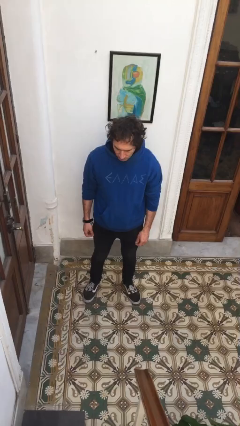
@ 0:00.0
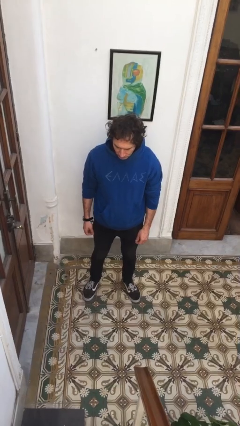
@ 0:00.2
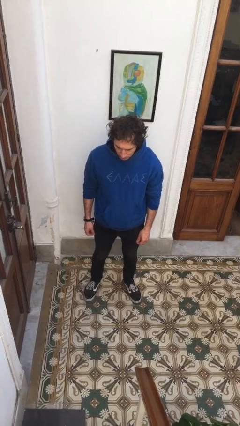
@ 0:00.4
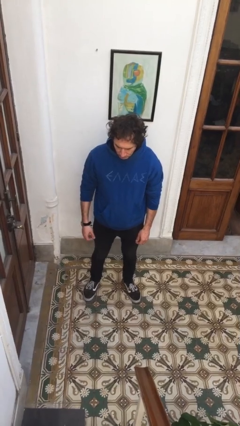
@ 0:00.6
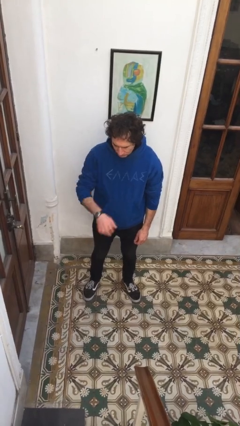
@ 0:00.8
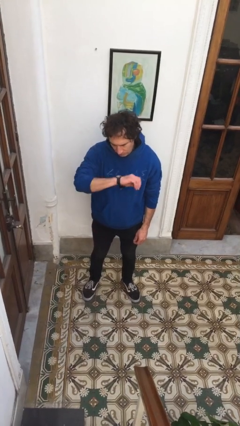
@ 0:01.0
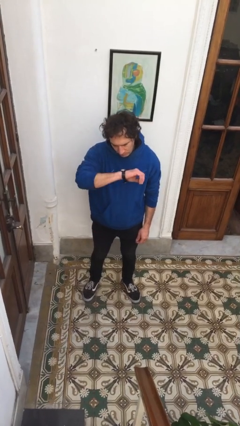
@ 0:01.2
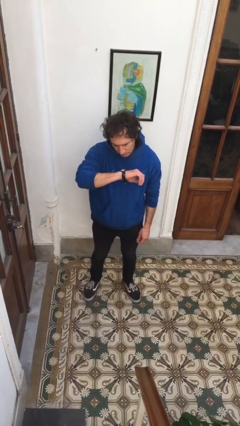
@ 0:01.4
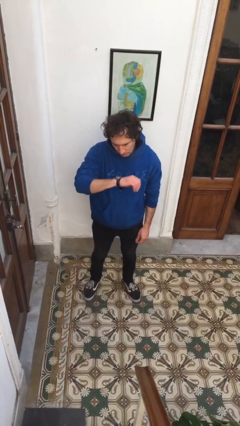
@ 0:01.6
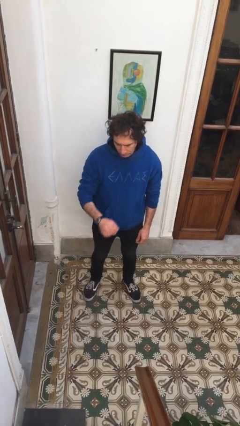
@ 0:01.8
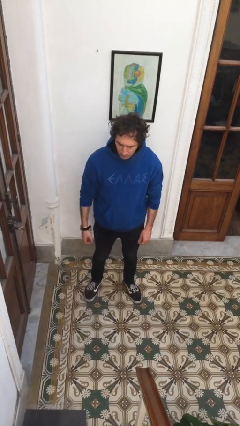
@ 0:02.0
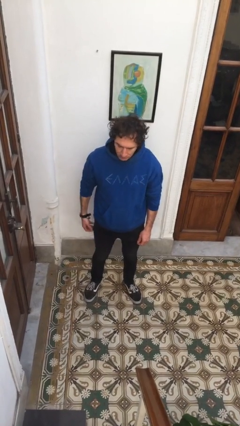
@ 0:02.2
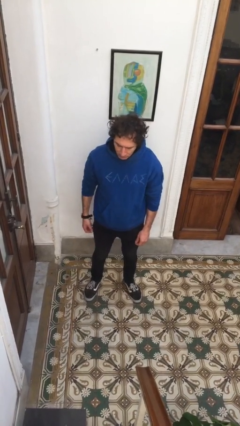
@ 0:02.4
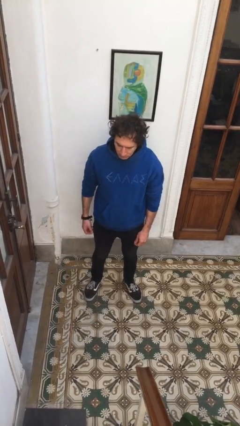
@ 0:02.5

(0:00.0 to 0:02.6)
person looks at wristwatch

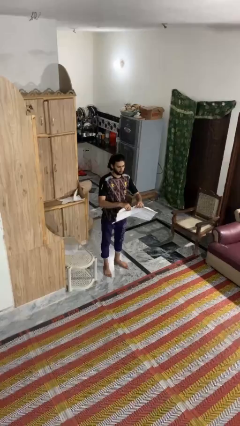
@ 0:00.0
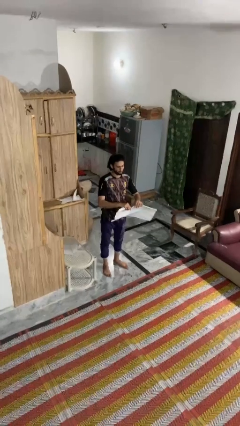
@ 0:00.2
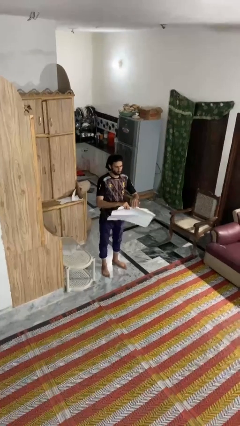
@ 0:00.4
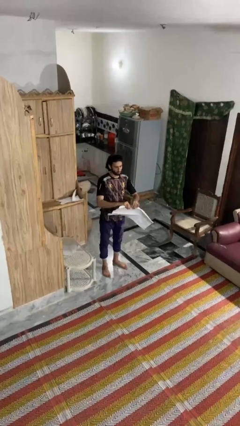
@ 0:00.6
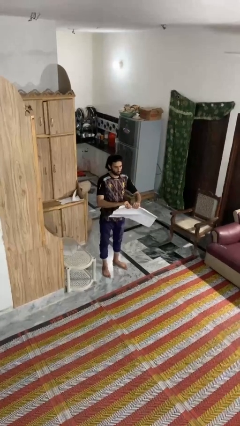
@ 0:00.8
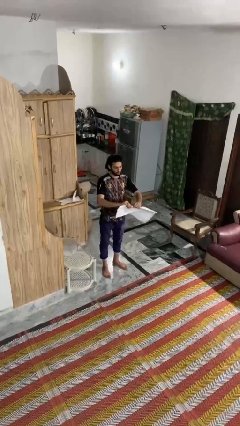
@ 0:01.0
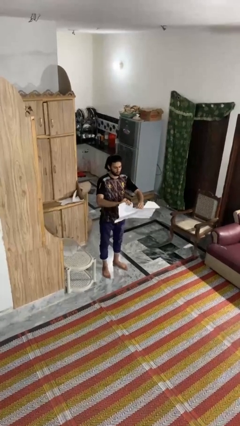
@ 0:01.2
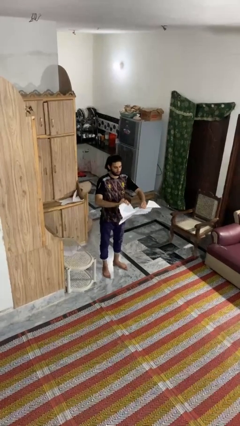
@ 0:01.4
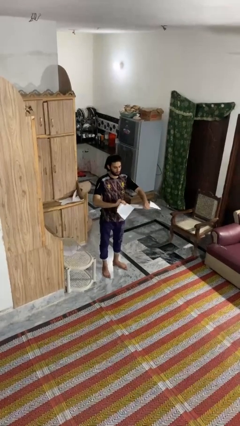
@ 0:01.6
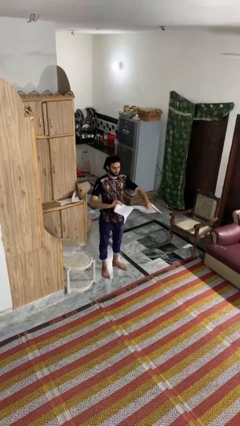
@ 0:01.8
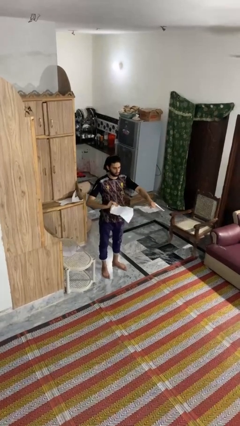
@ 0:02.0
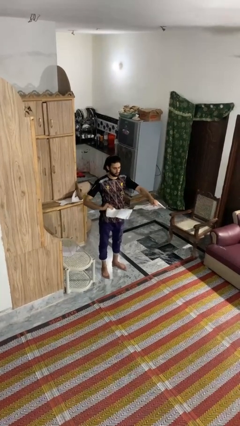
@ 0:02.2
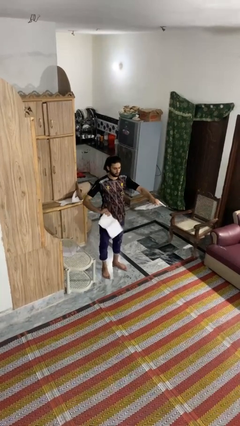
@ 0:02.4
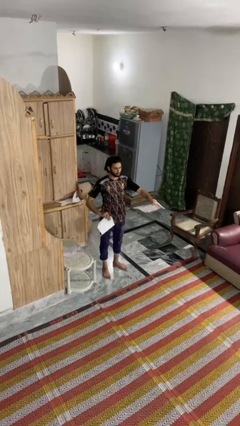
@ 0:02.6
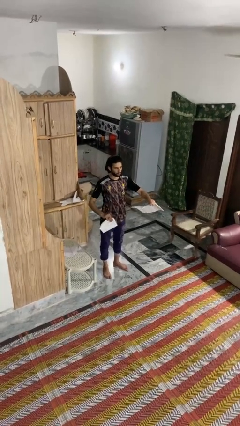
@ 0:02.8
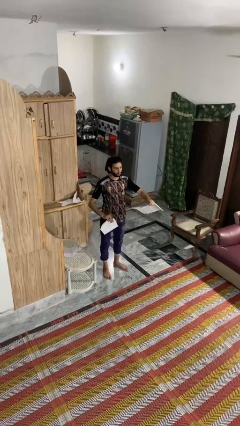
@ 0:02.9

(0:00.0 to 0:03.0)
person tears paper

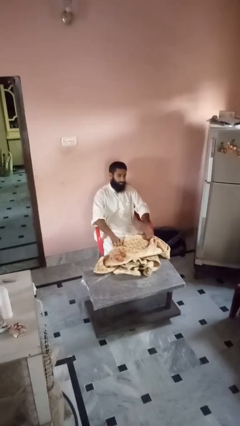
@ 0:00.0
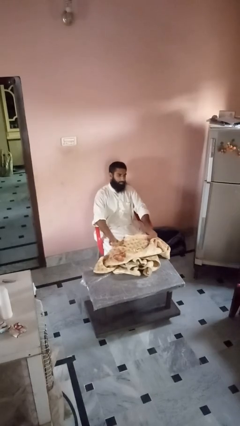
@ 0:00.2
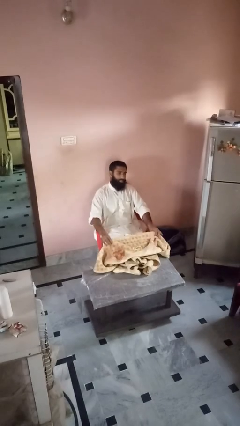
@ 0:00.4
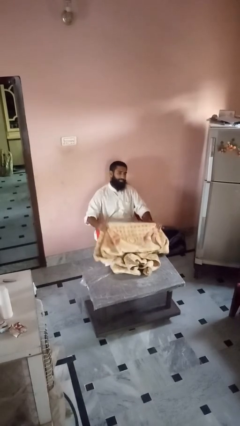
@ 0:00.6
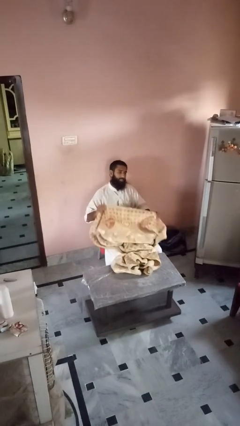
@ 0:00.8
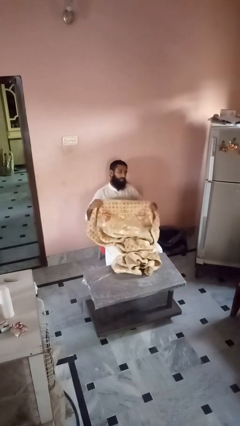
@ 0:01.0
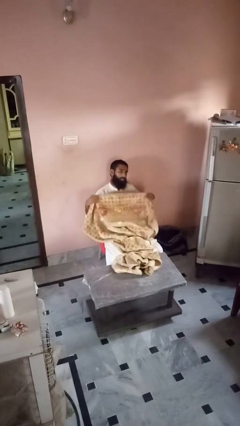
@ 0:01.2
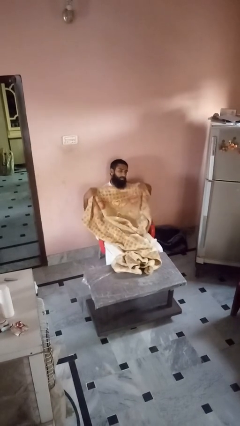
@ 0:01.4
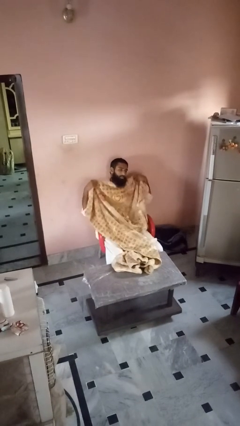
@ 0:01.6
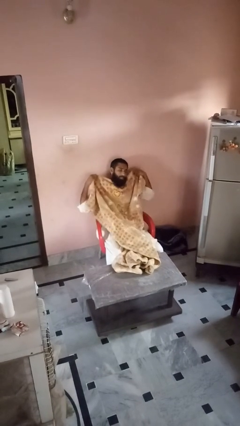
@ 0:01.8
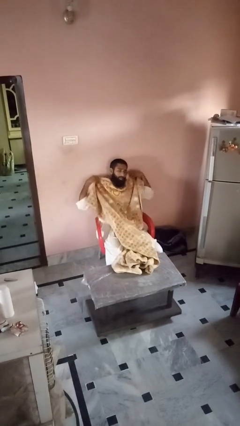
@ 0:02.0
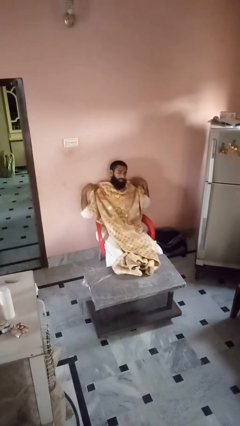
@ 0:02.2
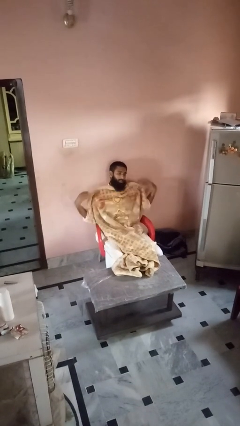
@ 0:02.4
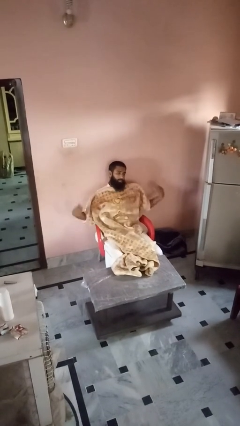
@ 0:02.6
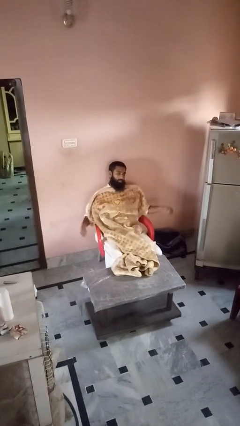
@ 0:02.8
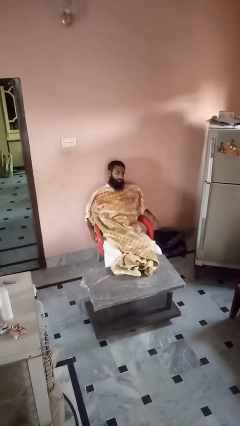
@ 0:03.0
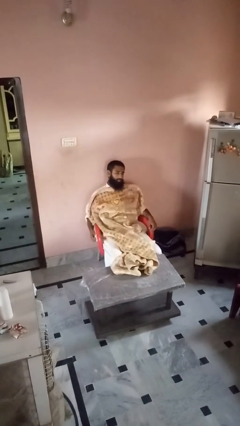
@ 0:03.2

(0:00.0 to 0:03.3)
person covers with blanket

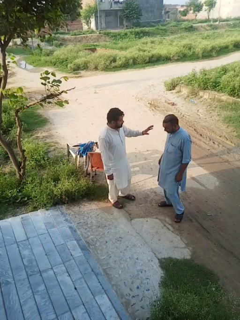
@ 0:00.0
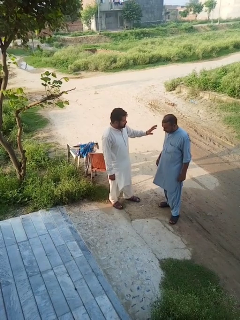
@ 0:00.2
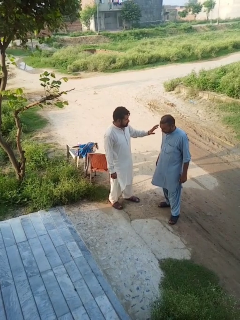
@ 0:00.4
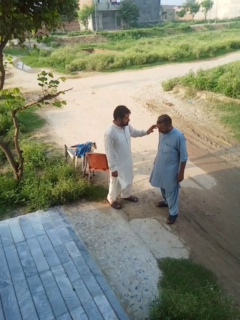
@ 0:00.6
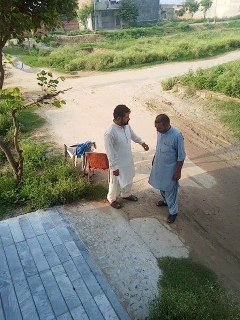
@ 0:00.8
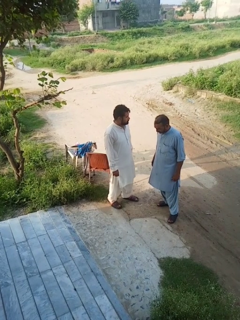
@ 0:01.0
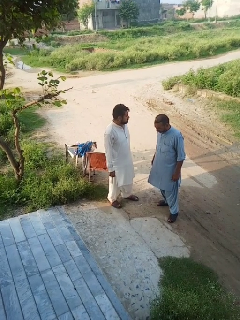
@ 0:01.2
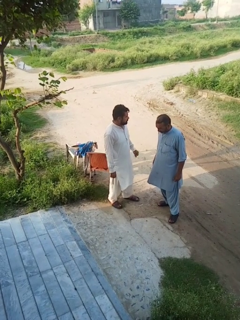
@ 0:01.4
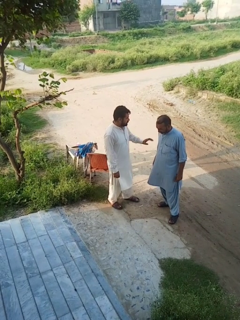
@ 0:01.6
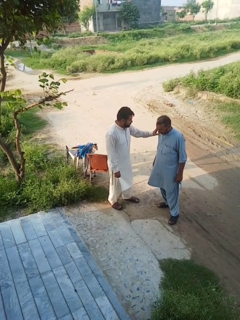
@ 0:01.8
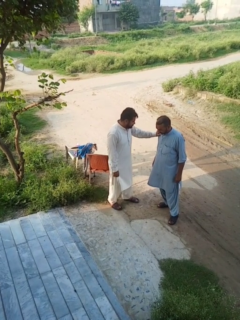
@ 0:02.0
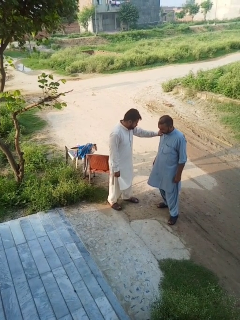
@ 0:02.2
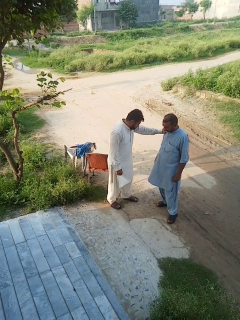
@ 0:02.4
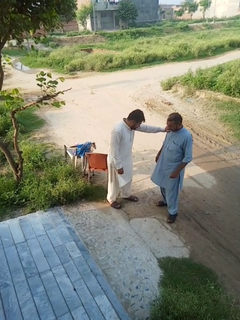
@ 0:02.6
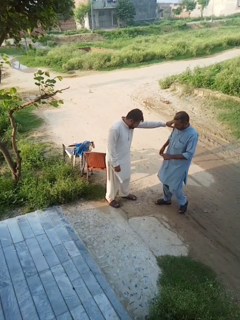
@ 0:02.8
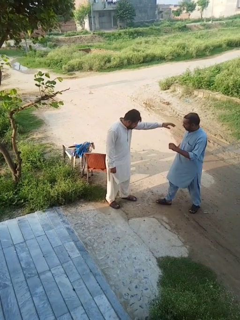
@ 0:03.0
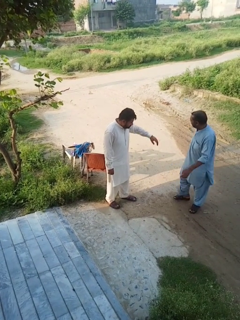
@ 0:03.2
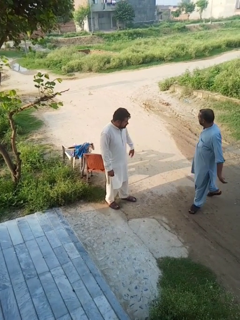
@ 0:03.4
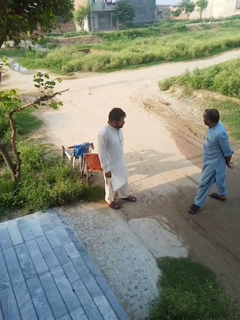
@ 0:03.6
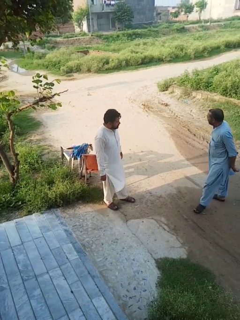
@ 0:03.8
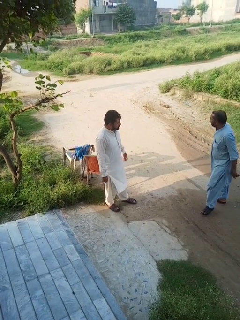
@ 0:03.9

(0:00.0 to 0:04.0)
person shoves person

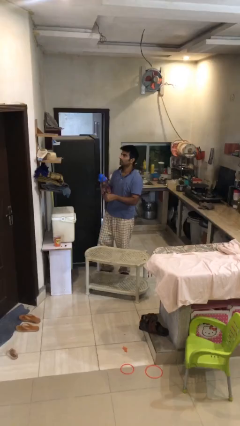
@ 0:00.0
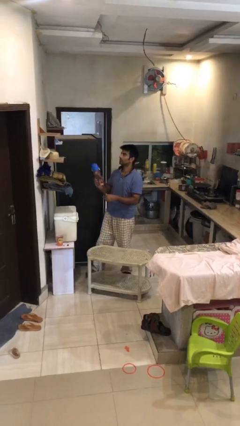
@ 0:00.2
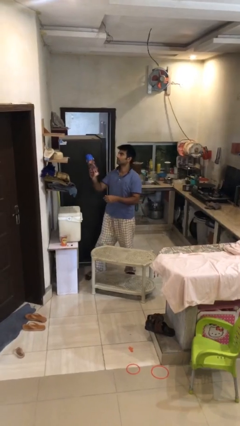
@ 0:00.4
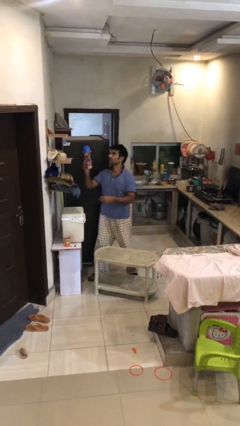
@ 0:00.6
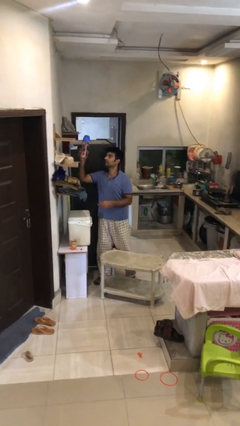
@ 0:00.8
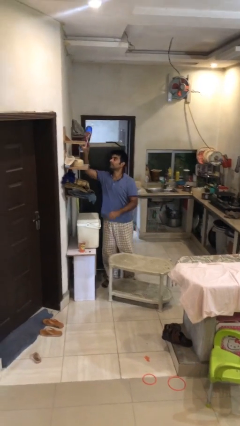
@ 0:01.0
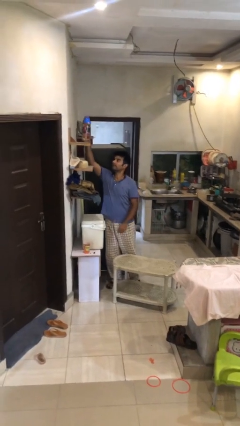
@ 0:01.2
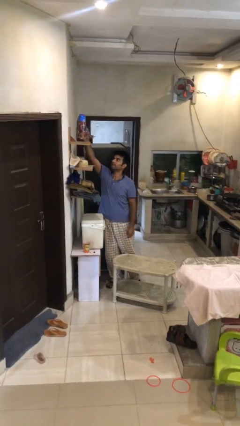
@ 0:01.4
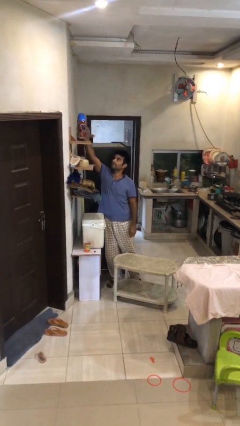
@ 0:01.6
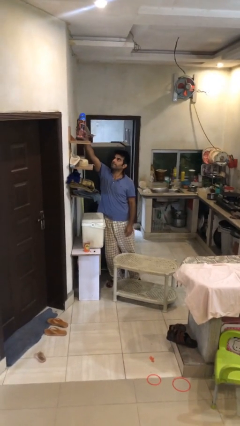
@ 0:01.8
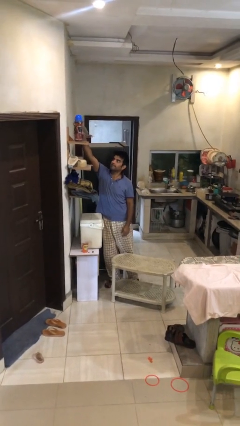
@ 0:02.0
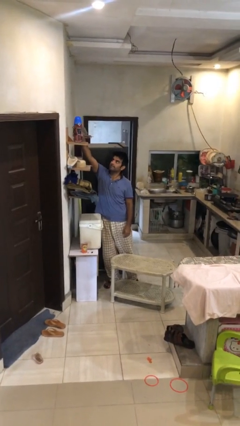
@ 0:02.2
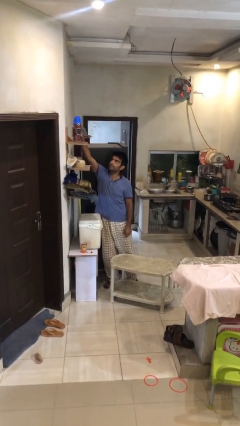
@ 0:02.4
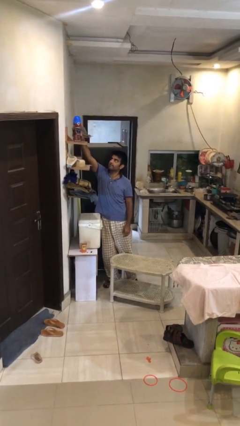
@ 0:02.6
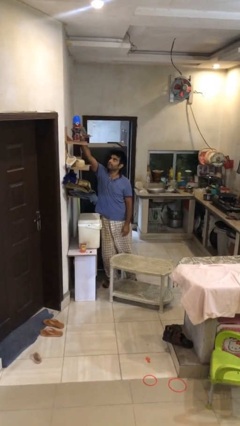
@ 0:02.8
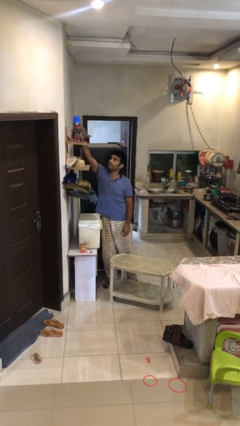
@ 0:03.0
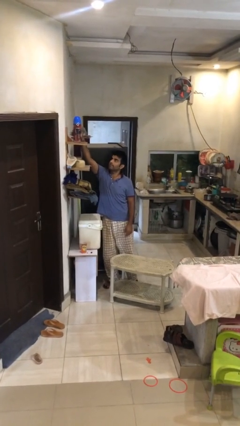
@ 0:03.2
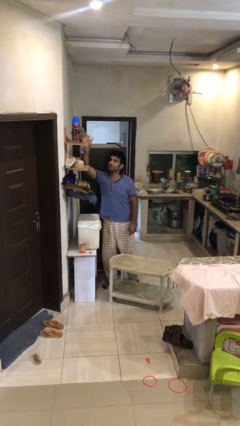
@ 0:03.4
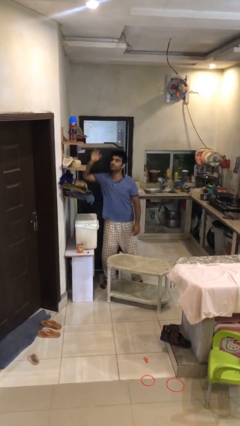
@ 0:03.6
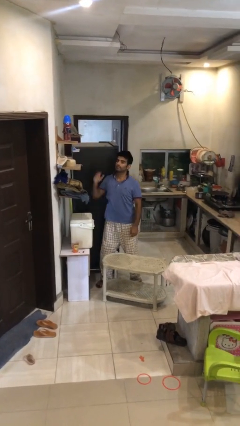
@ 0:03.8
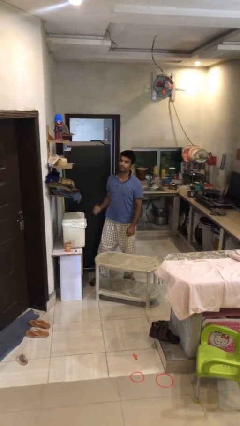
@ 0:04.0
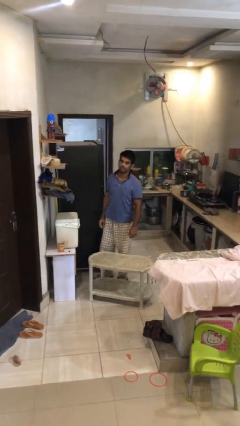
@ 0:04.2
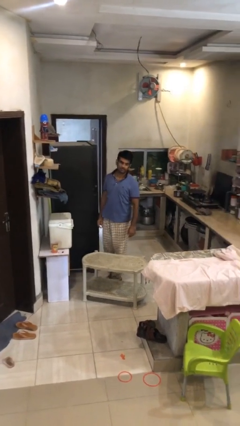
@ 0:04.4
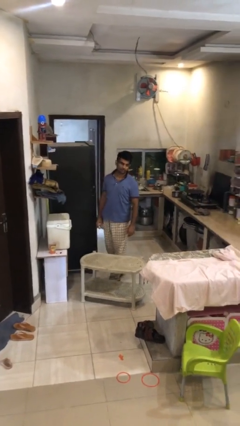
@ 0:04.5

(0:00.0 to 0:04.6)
person puts down object on shelf

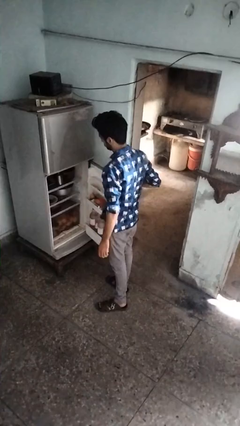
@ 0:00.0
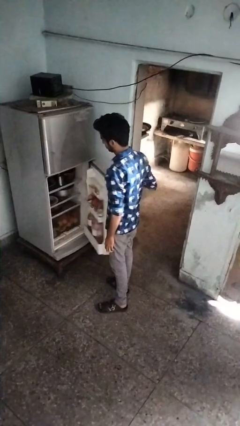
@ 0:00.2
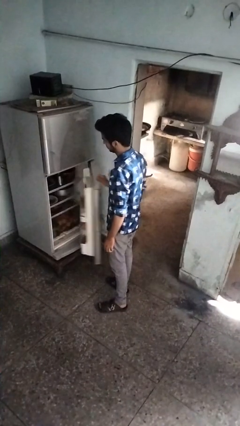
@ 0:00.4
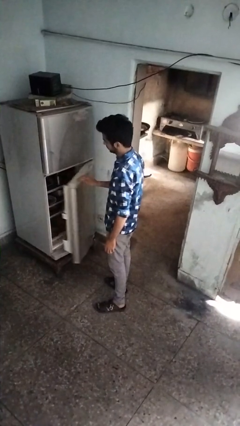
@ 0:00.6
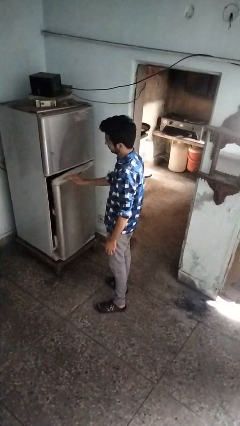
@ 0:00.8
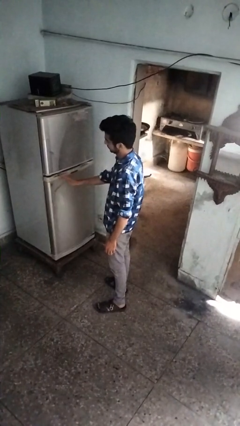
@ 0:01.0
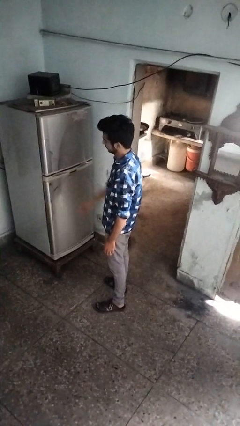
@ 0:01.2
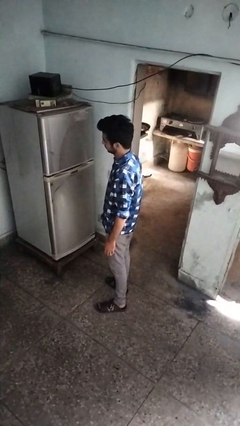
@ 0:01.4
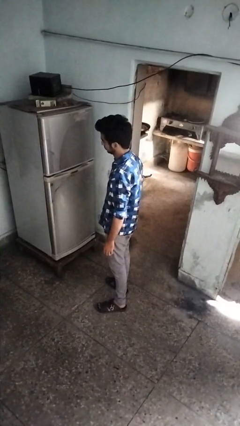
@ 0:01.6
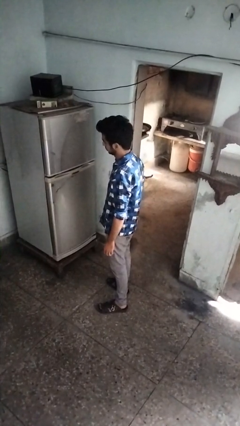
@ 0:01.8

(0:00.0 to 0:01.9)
person closes refrigerator
